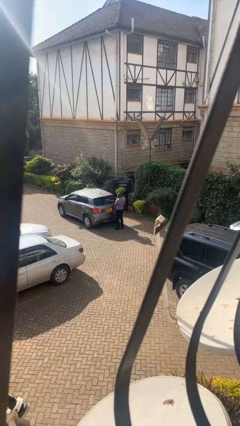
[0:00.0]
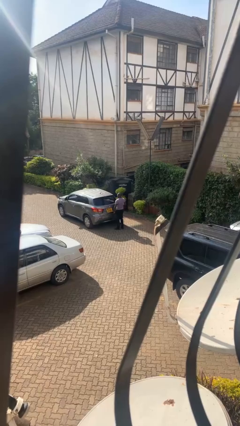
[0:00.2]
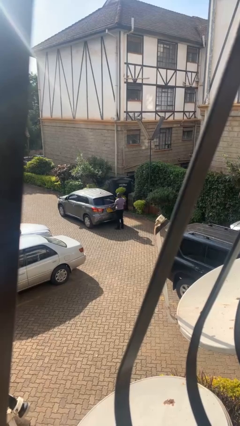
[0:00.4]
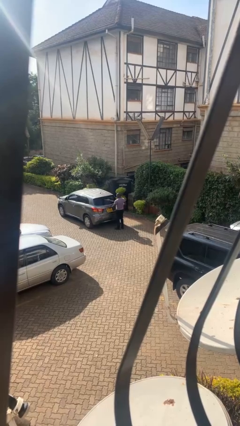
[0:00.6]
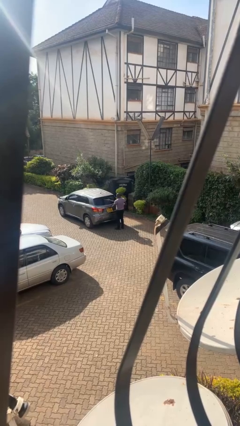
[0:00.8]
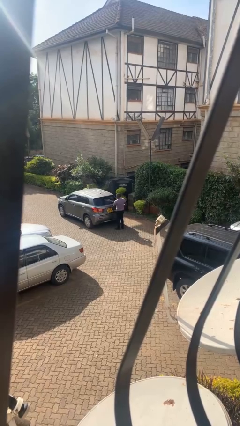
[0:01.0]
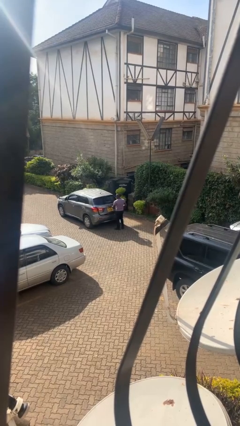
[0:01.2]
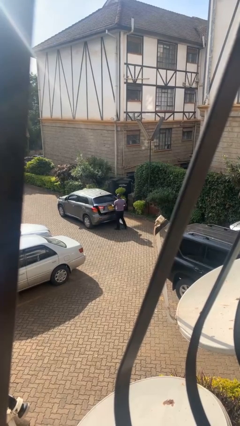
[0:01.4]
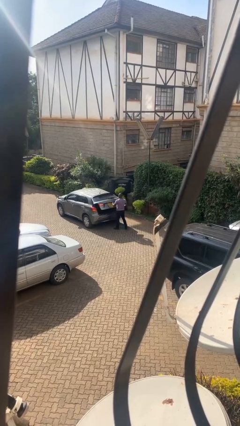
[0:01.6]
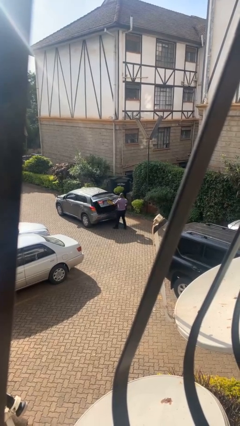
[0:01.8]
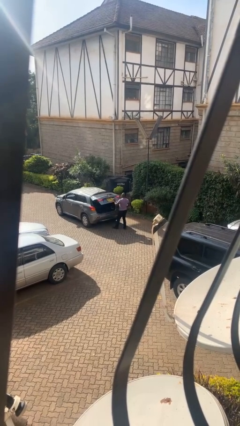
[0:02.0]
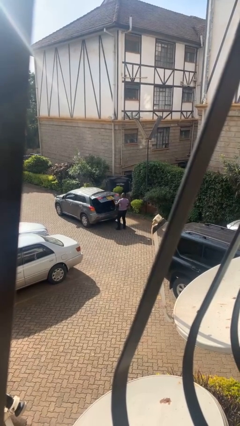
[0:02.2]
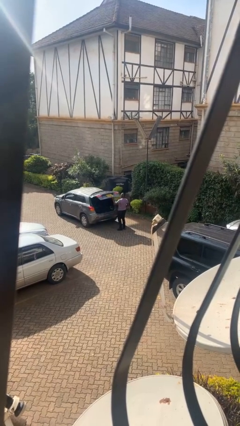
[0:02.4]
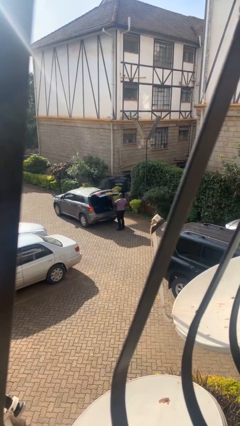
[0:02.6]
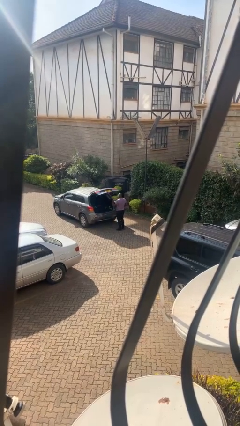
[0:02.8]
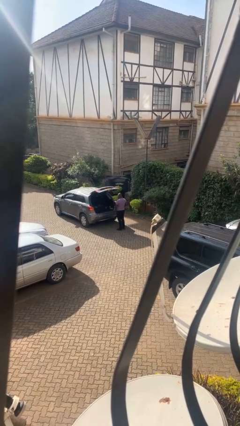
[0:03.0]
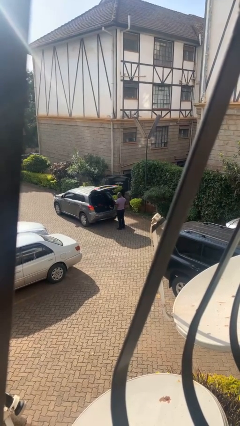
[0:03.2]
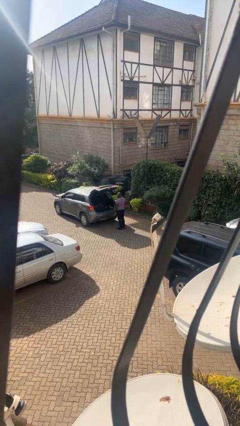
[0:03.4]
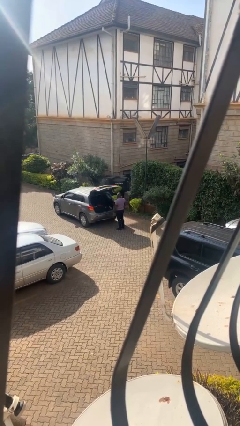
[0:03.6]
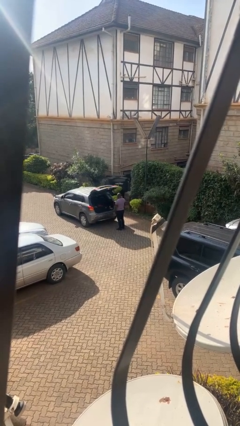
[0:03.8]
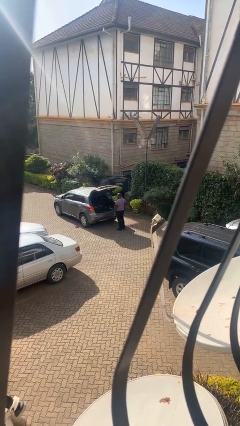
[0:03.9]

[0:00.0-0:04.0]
person opens car trunk

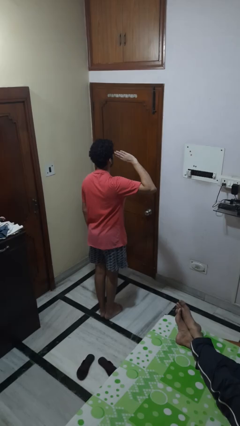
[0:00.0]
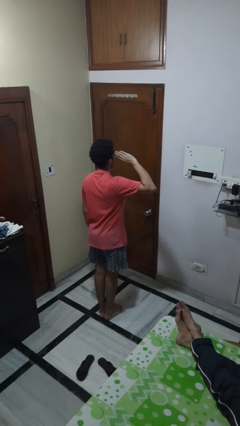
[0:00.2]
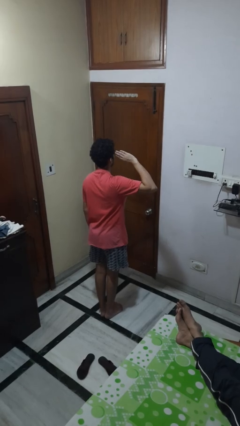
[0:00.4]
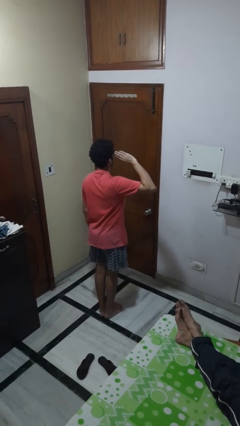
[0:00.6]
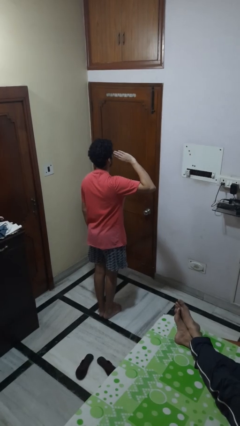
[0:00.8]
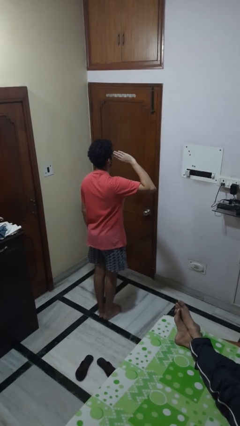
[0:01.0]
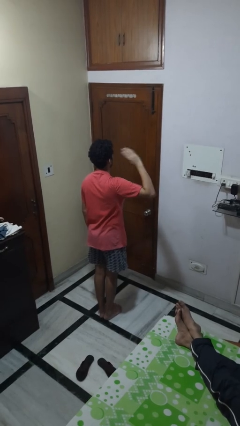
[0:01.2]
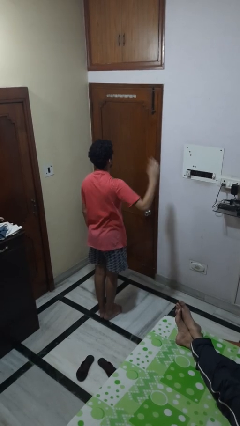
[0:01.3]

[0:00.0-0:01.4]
person salutes

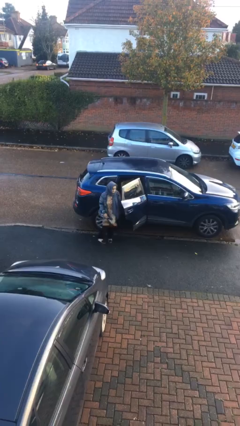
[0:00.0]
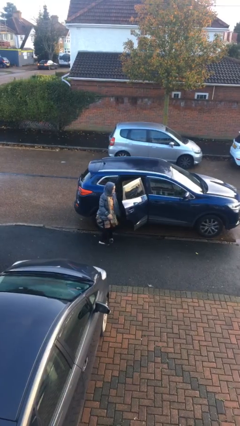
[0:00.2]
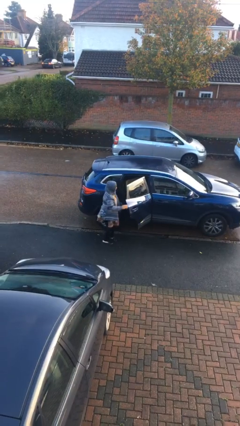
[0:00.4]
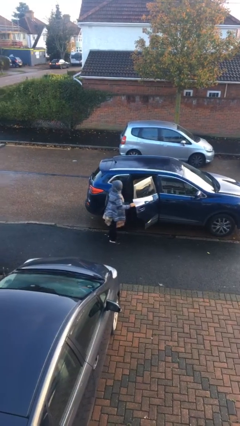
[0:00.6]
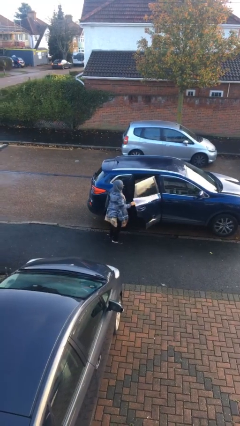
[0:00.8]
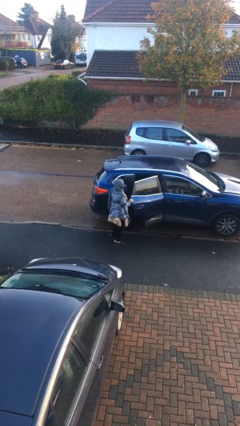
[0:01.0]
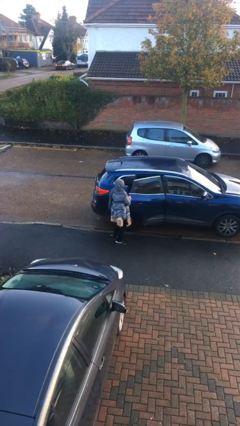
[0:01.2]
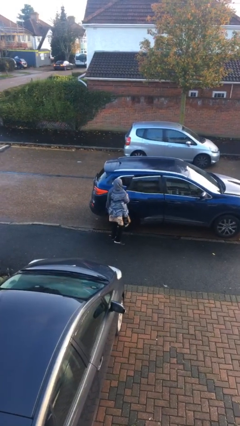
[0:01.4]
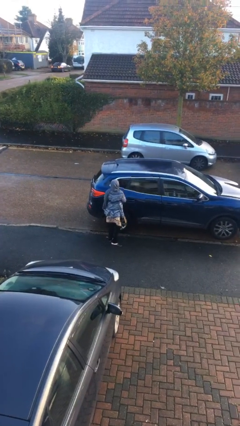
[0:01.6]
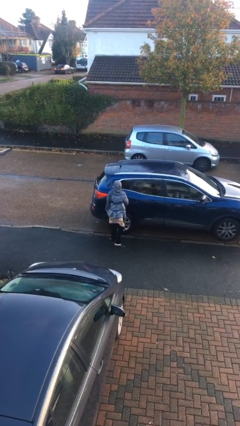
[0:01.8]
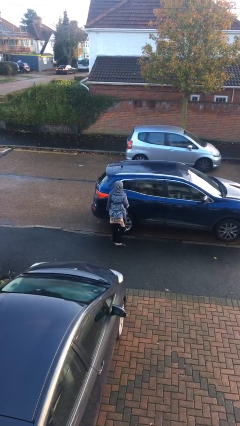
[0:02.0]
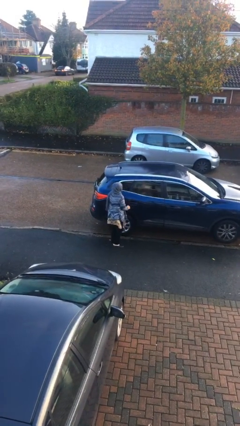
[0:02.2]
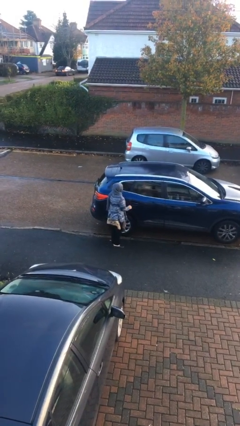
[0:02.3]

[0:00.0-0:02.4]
person closes car door

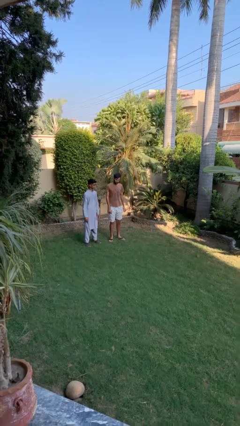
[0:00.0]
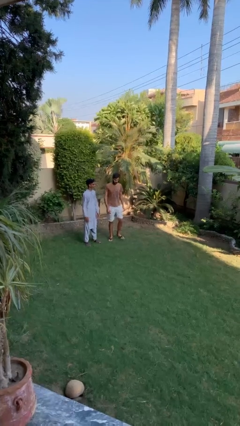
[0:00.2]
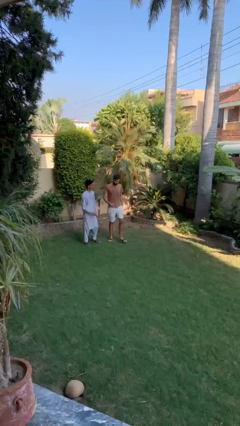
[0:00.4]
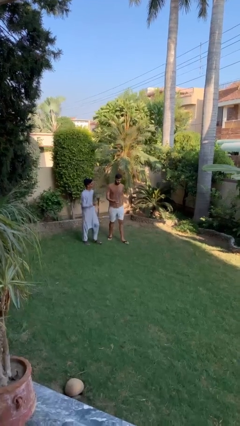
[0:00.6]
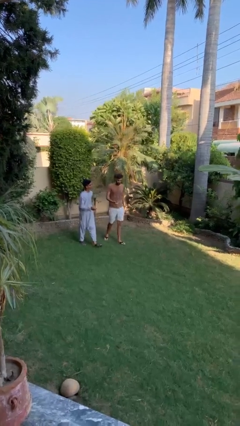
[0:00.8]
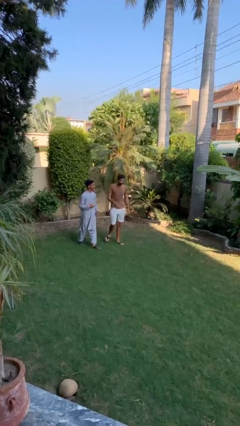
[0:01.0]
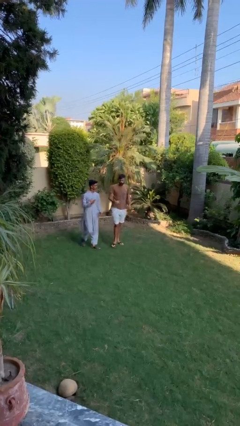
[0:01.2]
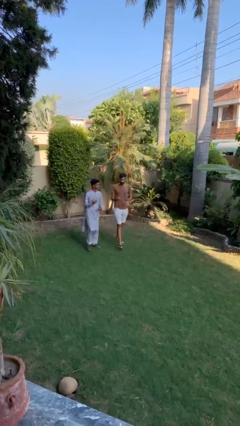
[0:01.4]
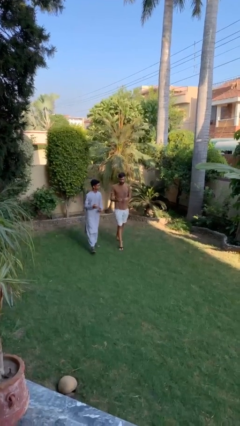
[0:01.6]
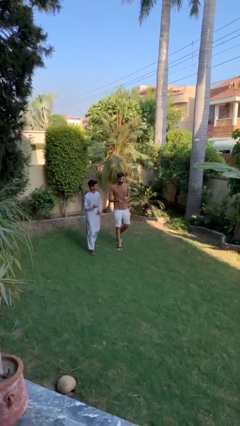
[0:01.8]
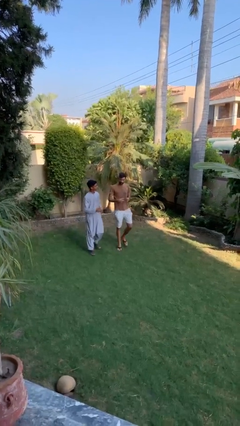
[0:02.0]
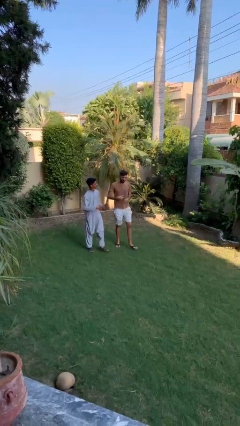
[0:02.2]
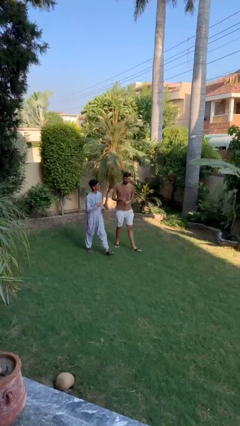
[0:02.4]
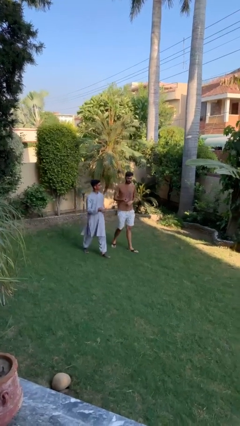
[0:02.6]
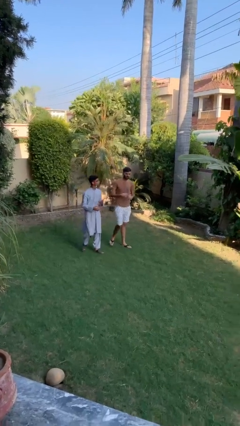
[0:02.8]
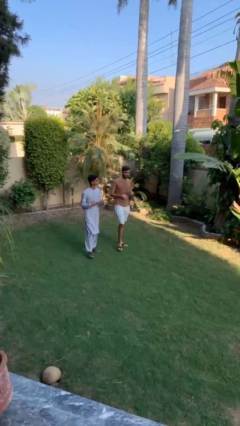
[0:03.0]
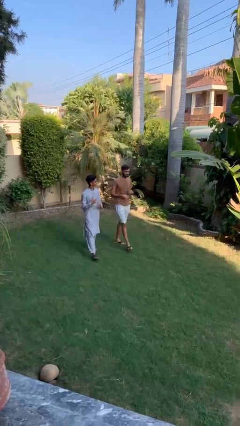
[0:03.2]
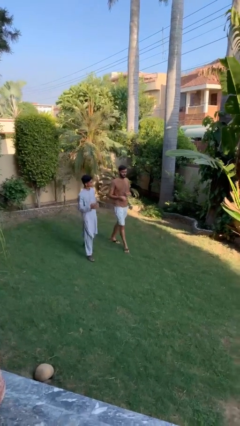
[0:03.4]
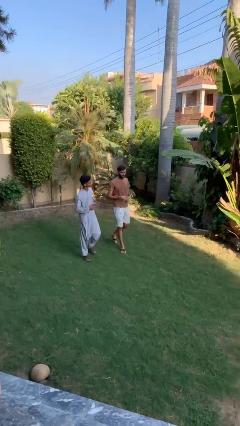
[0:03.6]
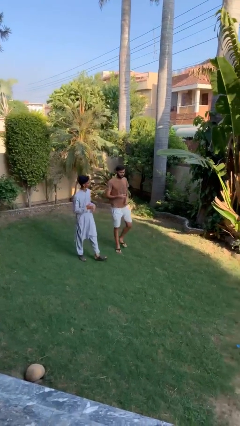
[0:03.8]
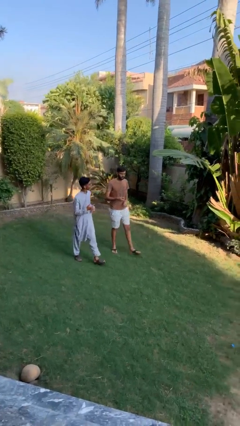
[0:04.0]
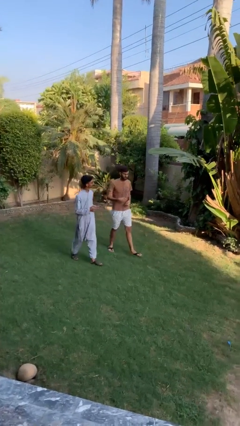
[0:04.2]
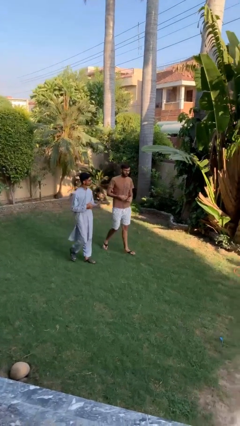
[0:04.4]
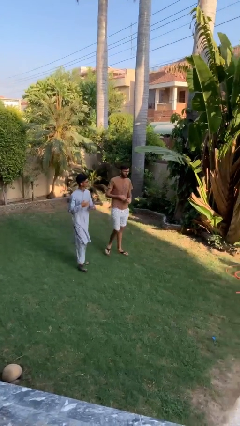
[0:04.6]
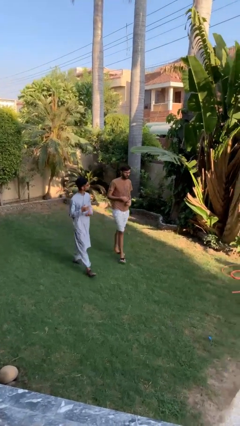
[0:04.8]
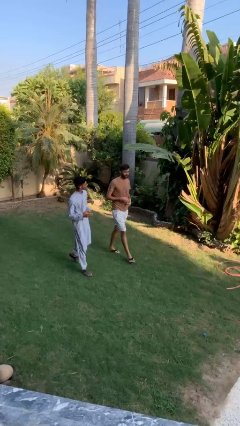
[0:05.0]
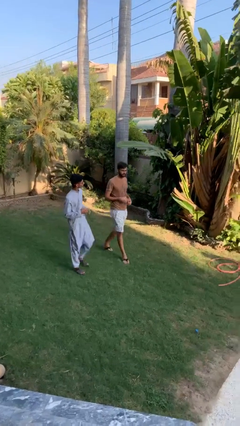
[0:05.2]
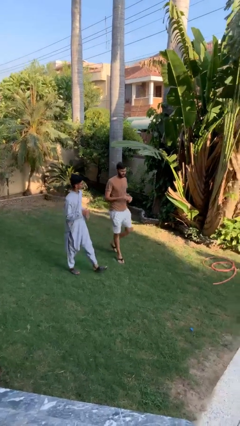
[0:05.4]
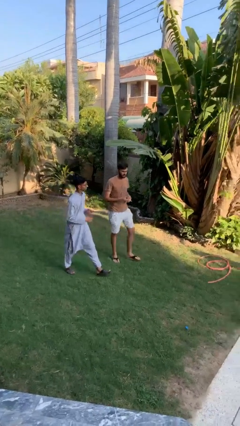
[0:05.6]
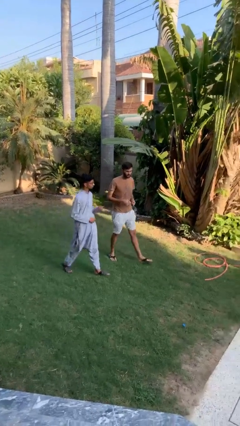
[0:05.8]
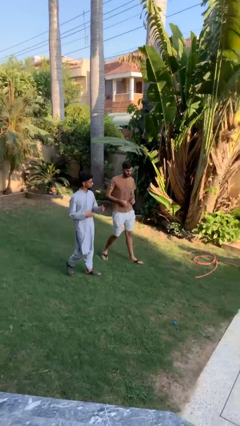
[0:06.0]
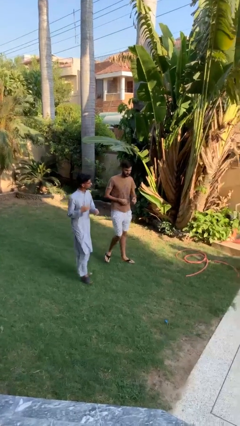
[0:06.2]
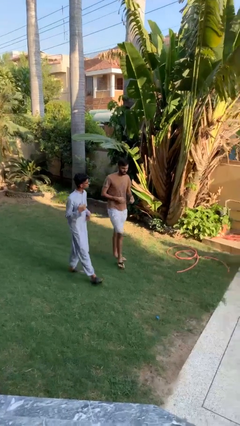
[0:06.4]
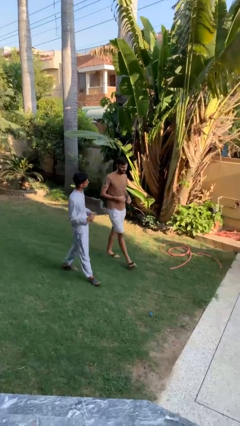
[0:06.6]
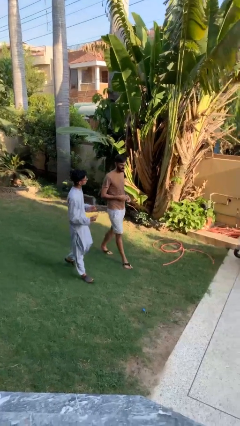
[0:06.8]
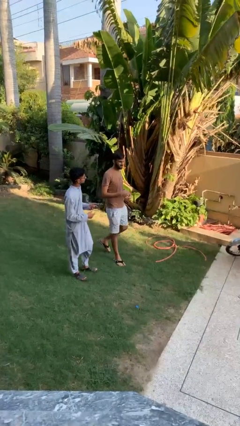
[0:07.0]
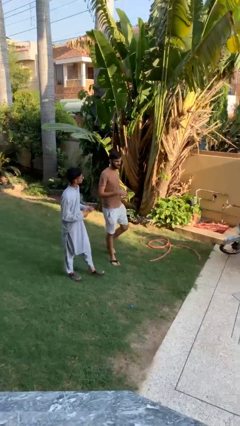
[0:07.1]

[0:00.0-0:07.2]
person talks to person

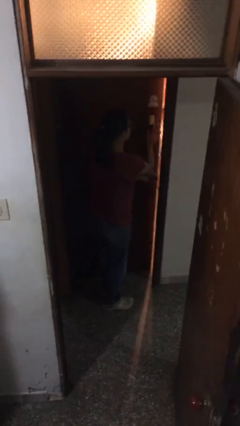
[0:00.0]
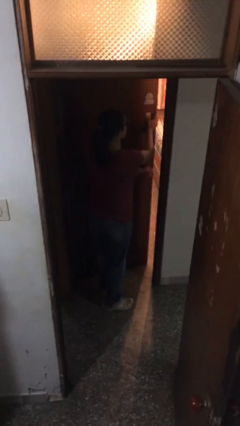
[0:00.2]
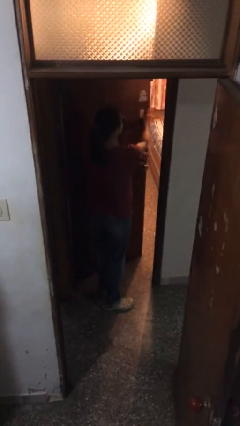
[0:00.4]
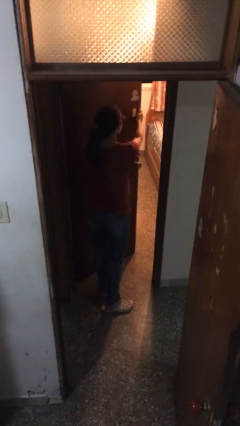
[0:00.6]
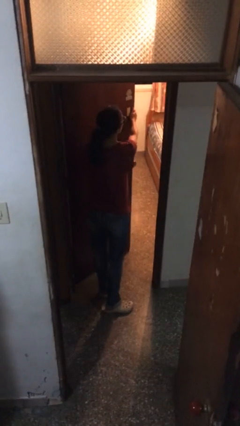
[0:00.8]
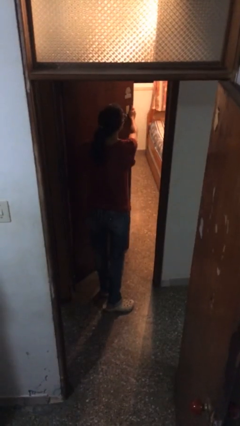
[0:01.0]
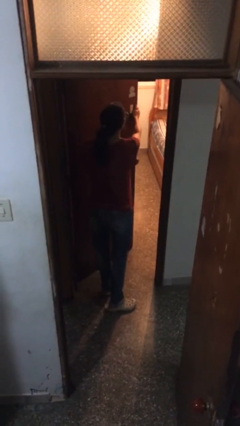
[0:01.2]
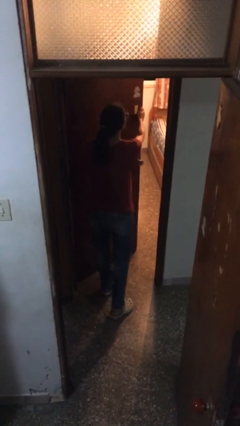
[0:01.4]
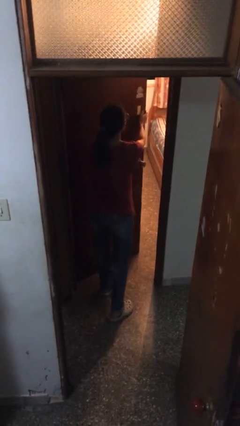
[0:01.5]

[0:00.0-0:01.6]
person opens facility door

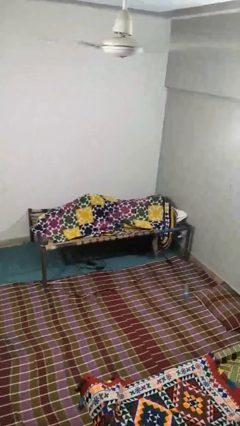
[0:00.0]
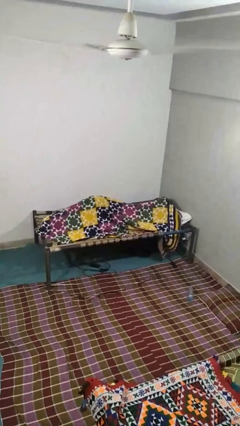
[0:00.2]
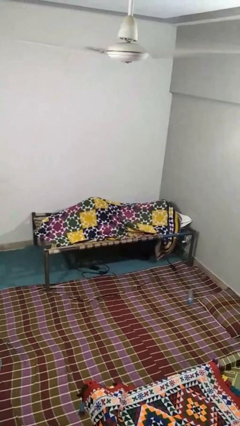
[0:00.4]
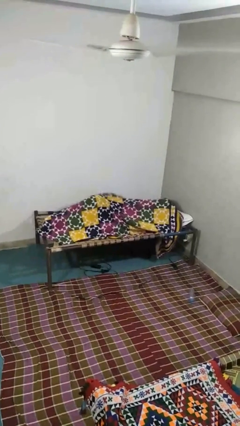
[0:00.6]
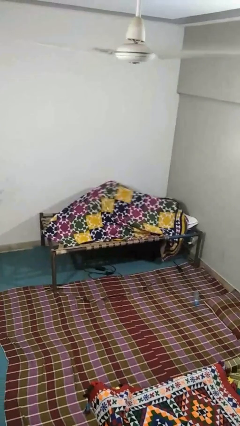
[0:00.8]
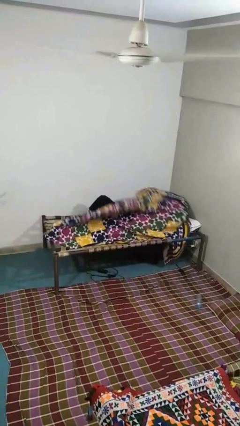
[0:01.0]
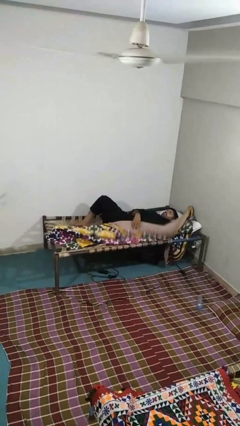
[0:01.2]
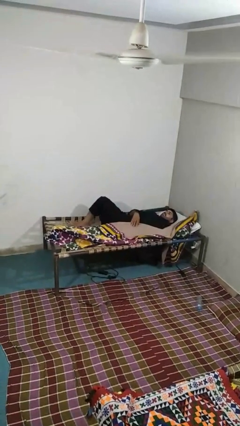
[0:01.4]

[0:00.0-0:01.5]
person uncovers with blanket
